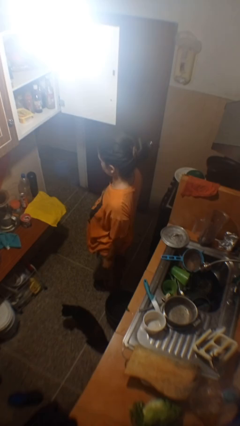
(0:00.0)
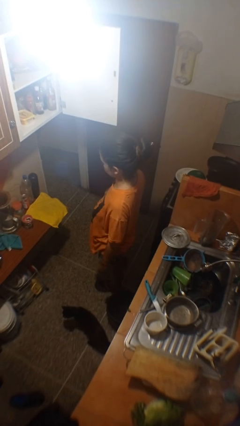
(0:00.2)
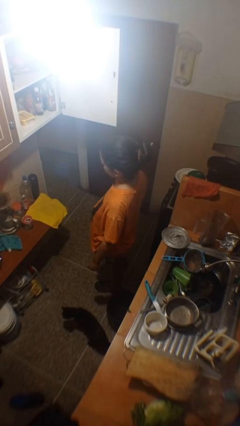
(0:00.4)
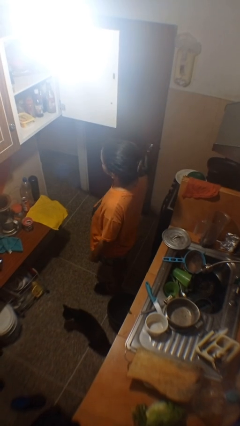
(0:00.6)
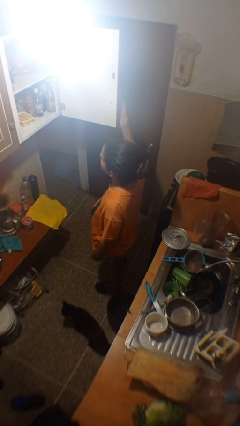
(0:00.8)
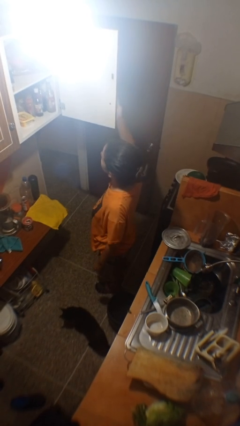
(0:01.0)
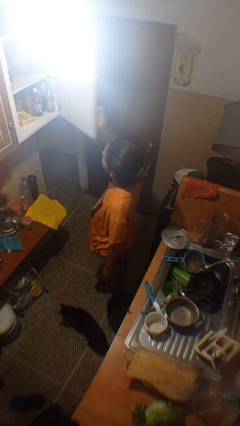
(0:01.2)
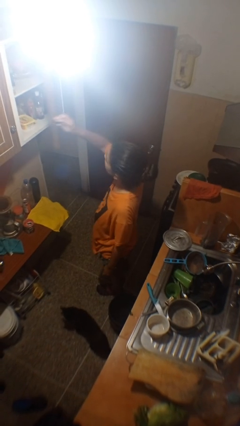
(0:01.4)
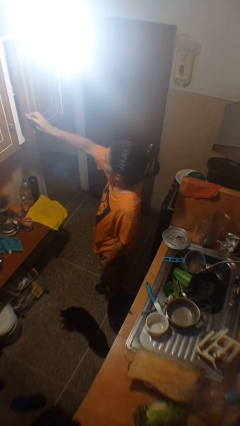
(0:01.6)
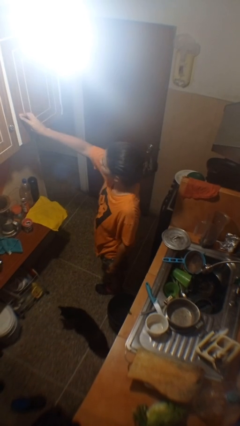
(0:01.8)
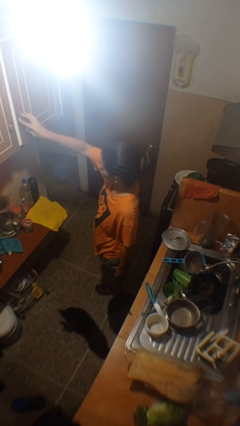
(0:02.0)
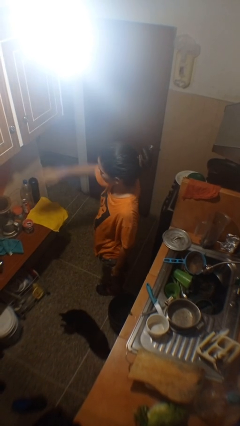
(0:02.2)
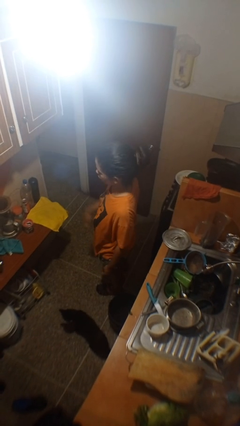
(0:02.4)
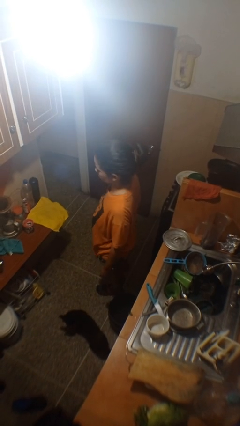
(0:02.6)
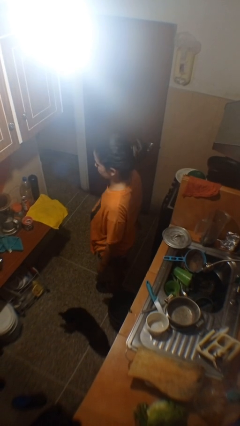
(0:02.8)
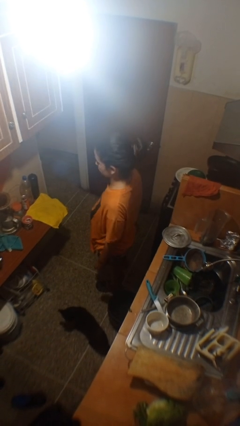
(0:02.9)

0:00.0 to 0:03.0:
person closes cabinet

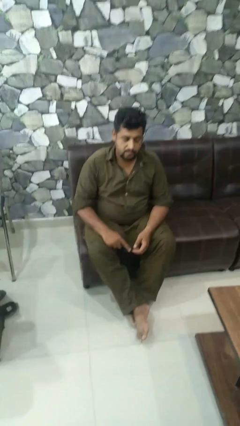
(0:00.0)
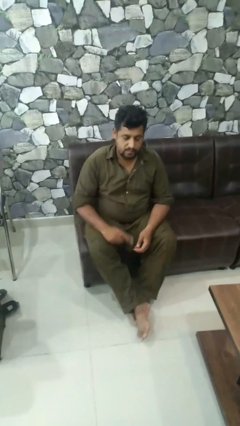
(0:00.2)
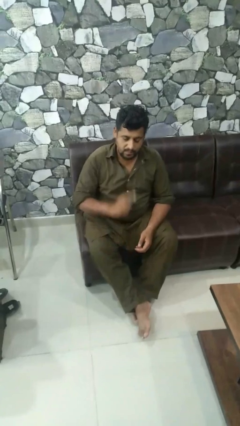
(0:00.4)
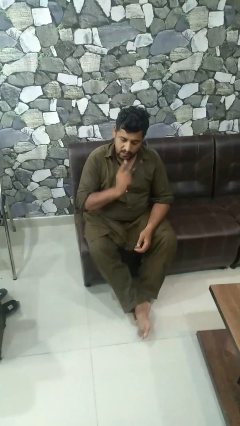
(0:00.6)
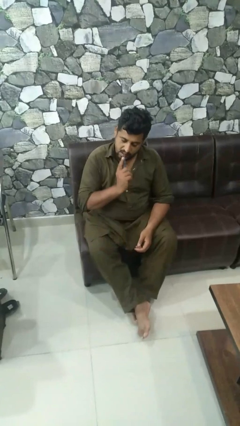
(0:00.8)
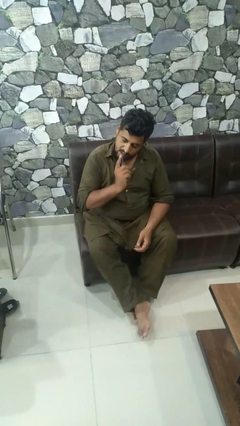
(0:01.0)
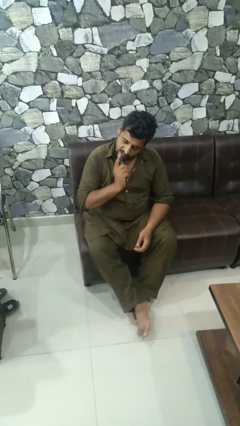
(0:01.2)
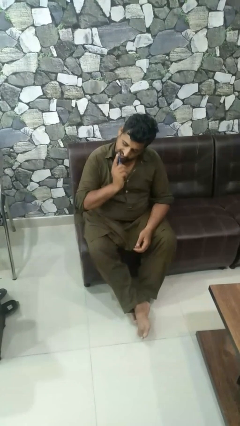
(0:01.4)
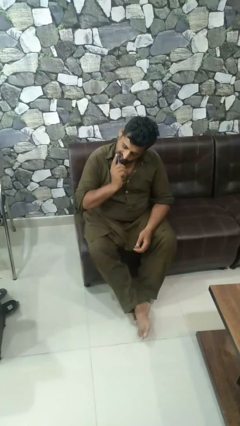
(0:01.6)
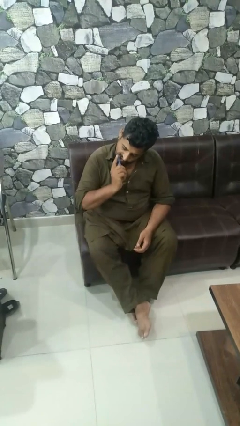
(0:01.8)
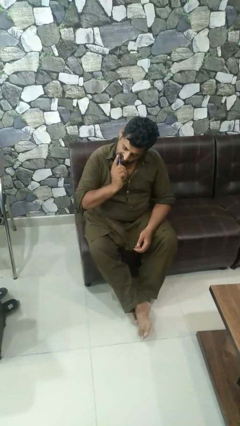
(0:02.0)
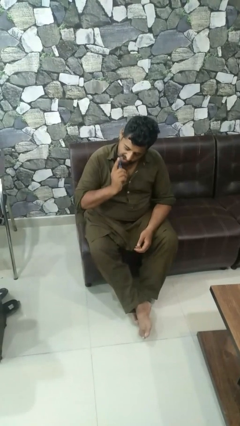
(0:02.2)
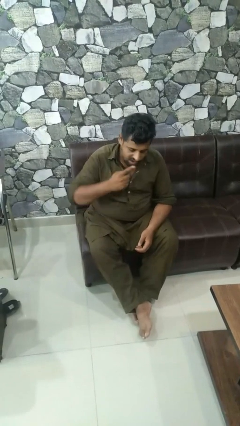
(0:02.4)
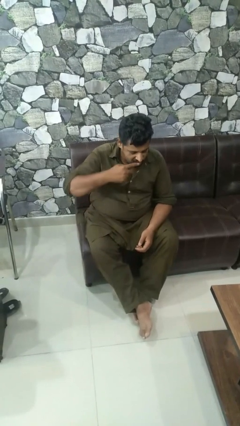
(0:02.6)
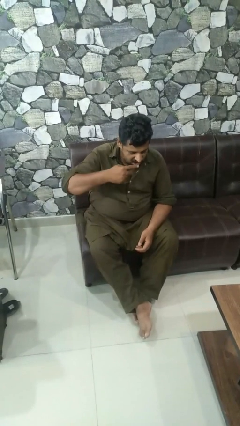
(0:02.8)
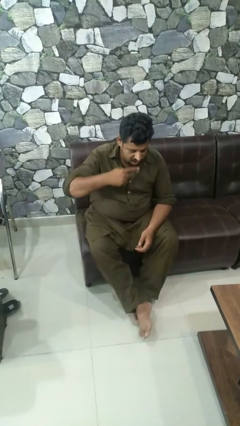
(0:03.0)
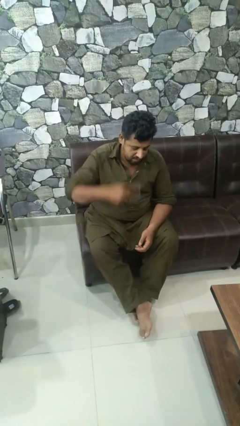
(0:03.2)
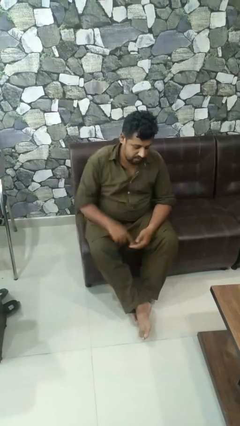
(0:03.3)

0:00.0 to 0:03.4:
person brushes teeth

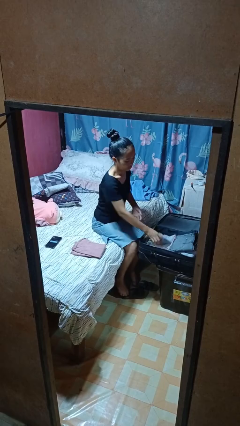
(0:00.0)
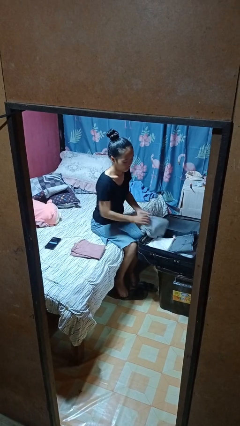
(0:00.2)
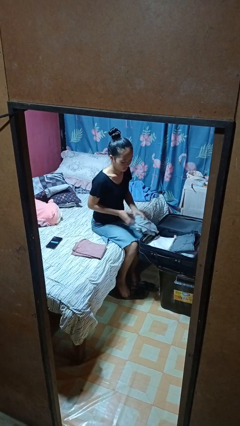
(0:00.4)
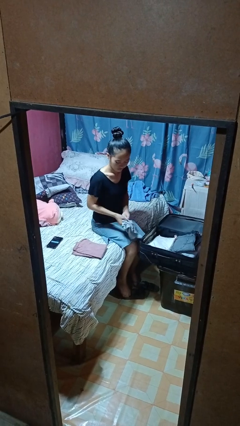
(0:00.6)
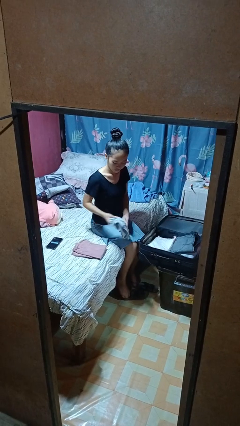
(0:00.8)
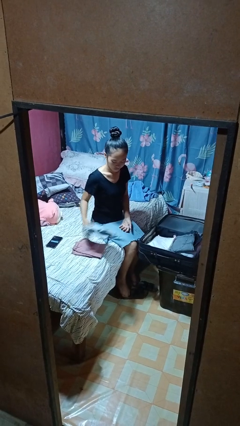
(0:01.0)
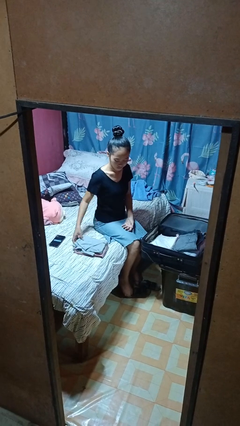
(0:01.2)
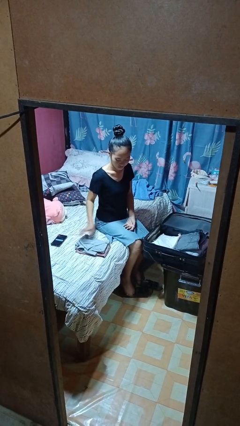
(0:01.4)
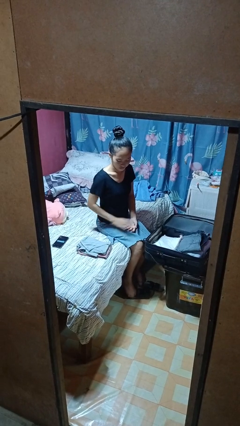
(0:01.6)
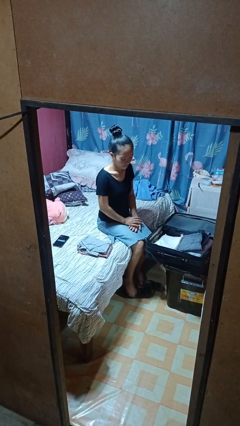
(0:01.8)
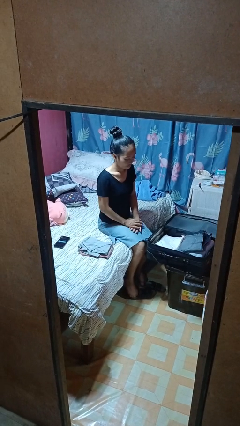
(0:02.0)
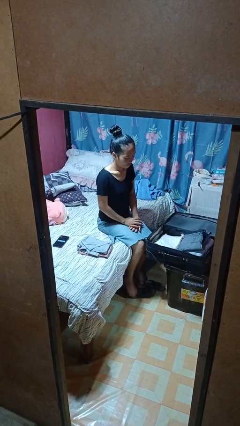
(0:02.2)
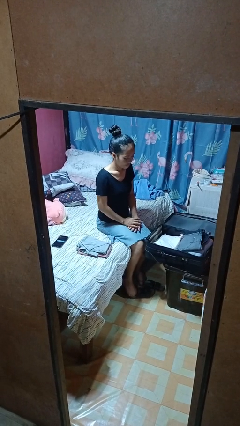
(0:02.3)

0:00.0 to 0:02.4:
person unloads clothes from suitcase

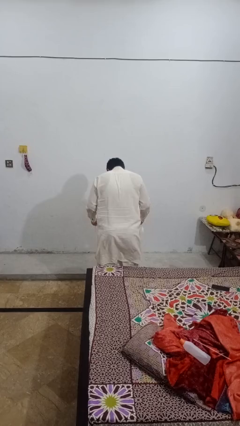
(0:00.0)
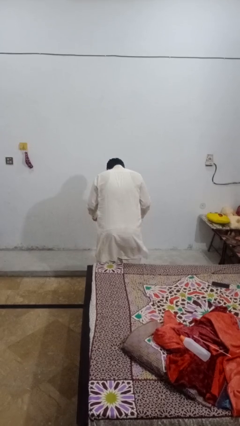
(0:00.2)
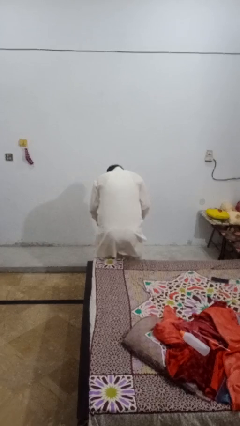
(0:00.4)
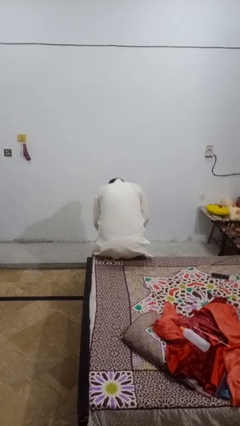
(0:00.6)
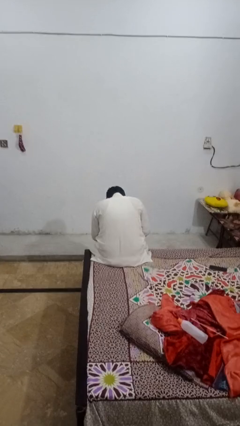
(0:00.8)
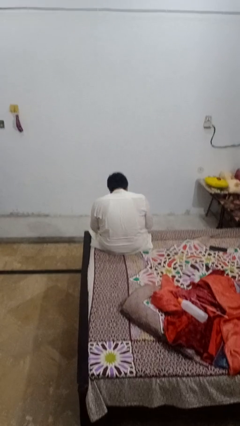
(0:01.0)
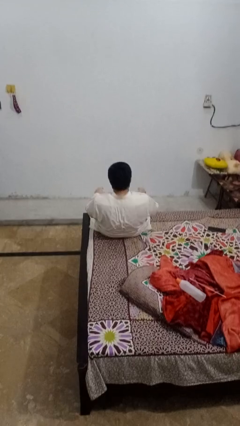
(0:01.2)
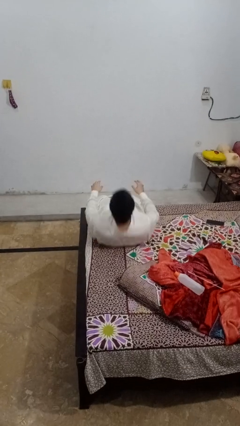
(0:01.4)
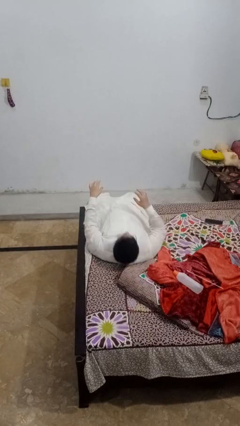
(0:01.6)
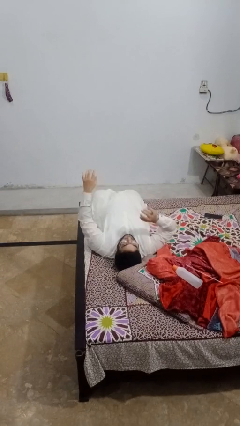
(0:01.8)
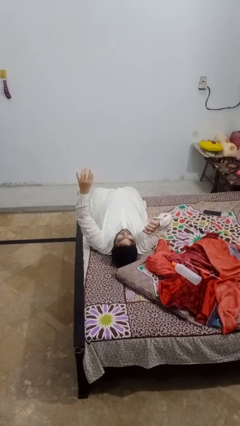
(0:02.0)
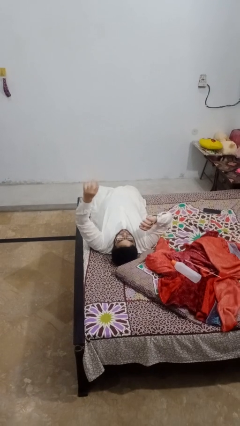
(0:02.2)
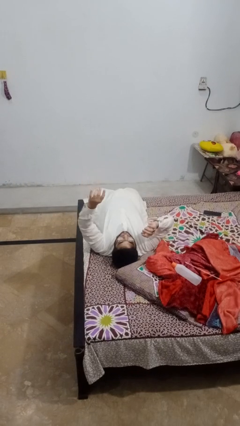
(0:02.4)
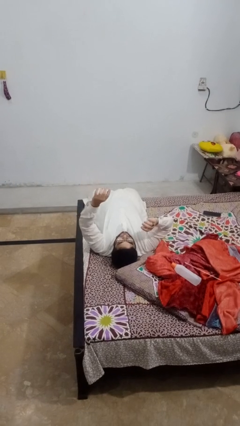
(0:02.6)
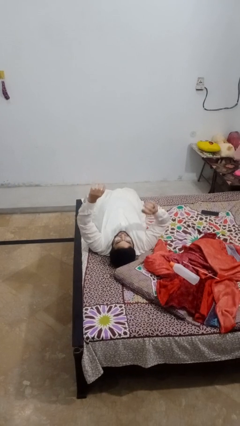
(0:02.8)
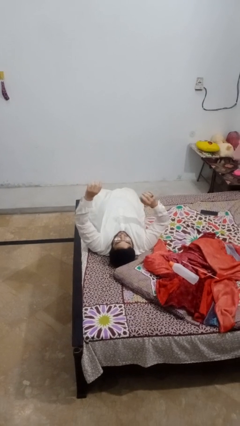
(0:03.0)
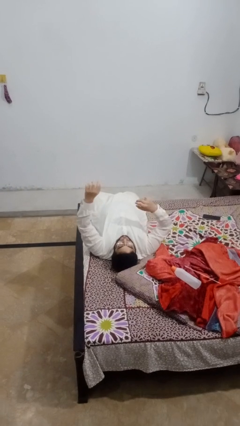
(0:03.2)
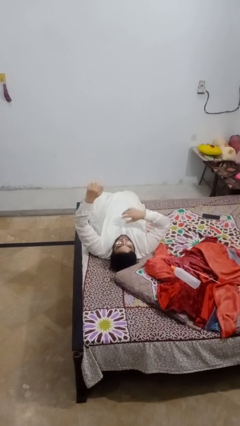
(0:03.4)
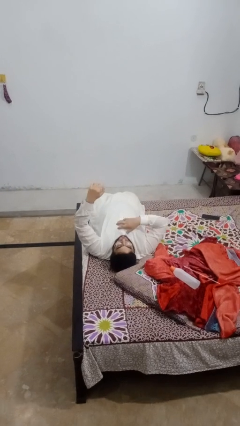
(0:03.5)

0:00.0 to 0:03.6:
person lies down on bed

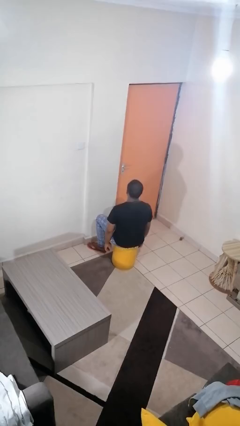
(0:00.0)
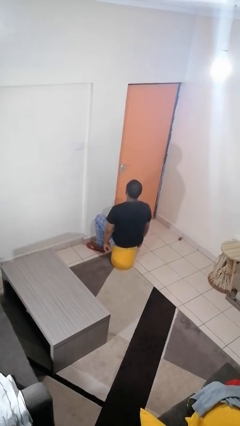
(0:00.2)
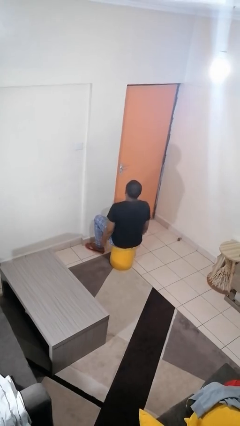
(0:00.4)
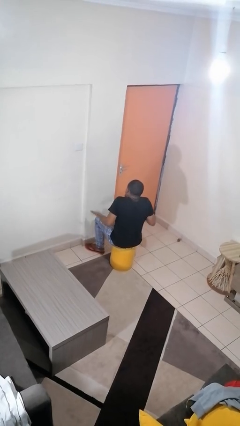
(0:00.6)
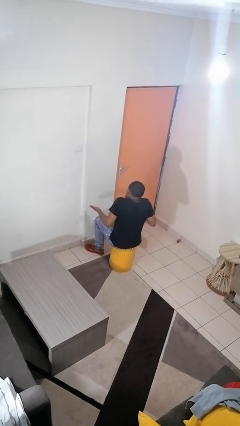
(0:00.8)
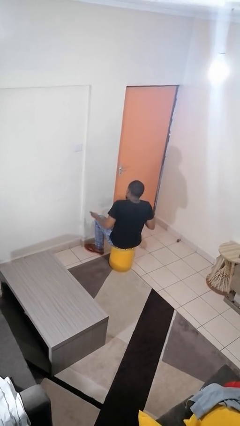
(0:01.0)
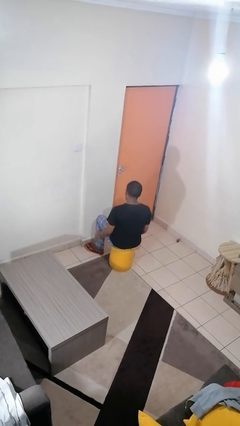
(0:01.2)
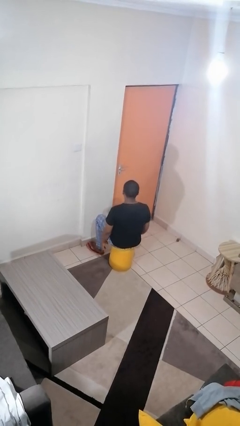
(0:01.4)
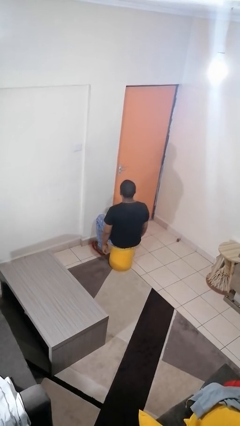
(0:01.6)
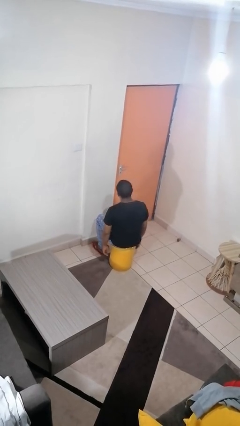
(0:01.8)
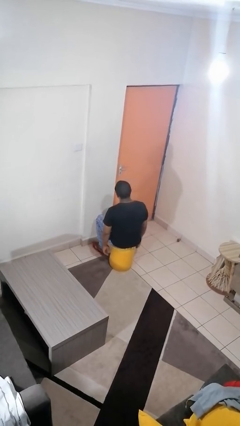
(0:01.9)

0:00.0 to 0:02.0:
person shrugs

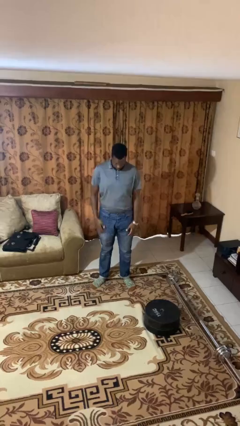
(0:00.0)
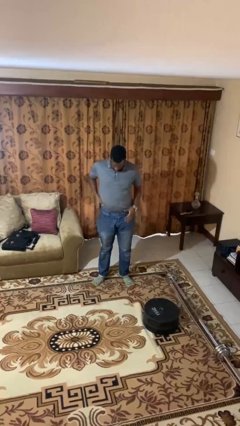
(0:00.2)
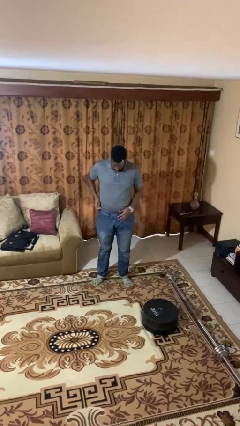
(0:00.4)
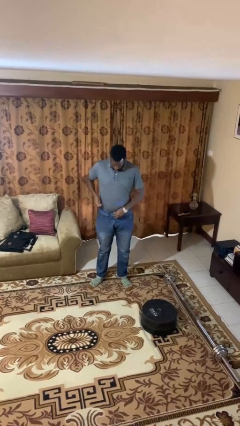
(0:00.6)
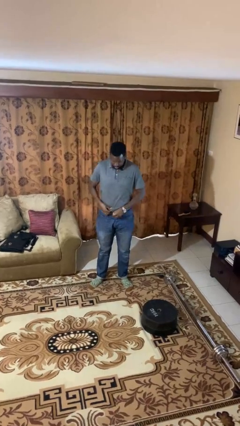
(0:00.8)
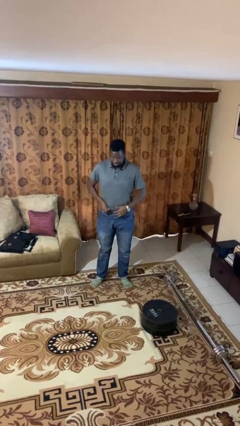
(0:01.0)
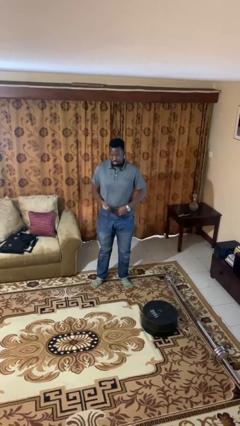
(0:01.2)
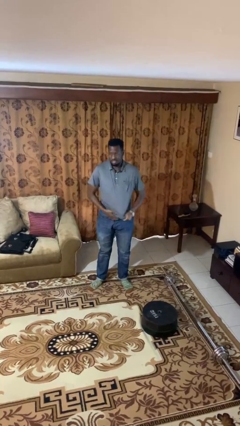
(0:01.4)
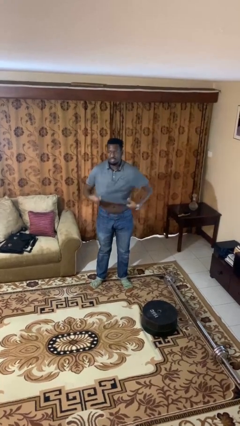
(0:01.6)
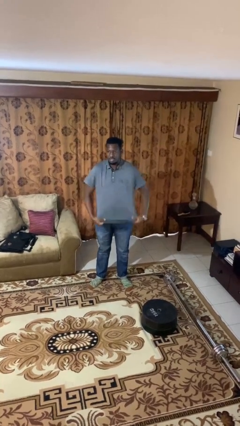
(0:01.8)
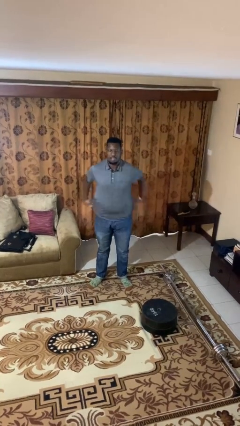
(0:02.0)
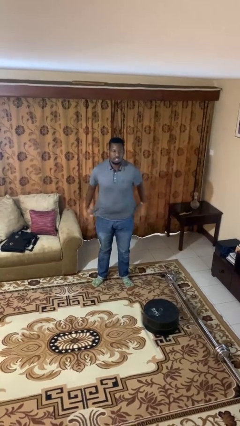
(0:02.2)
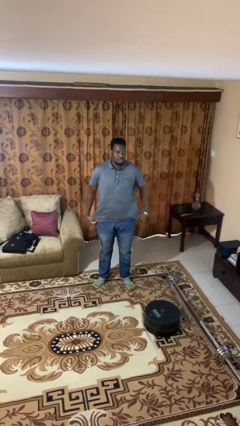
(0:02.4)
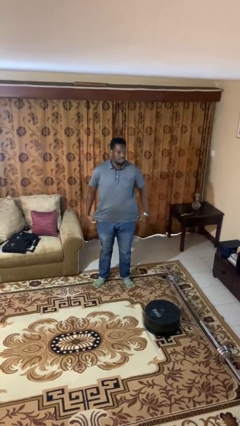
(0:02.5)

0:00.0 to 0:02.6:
person untucks shirt

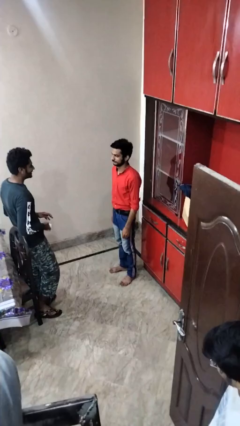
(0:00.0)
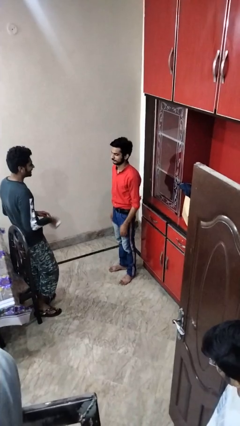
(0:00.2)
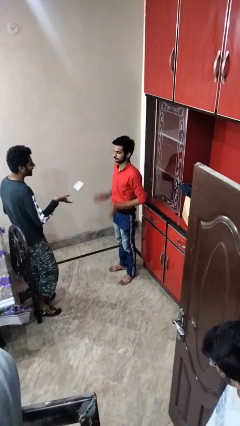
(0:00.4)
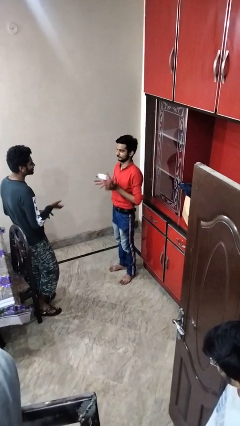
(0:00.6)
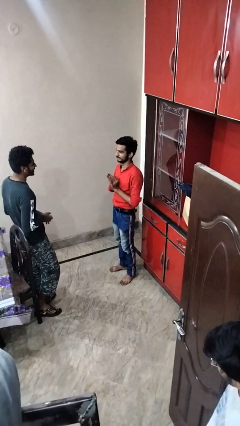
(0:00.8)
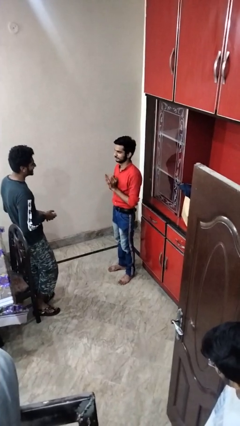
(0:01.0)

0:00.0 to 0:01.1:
person catches object from person
